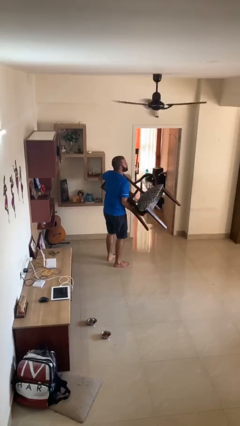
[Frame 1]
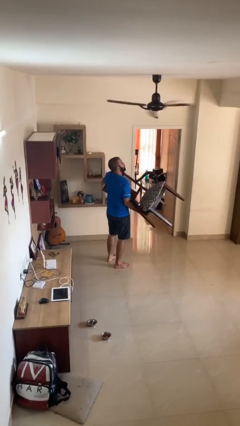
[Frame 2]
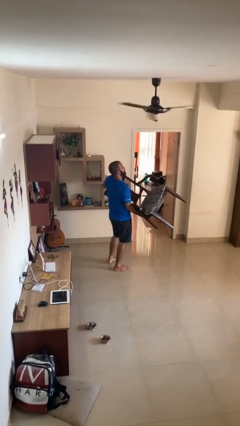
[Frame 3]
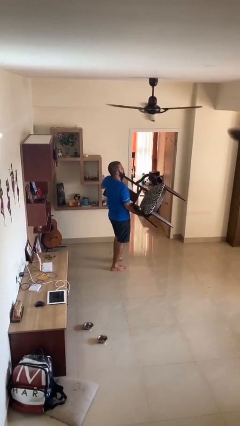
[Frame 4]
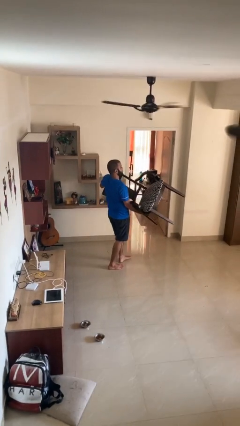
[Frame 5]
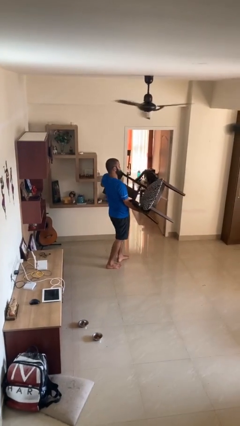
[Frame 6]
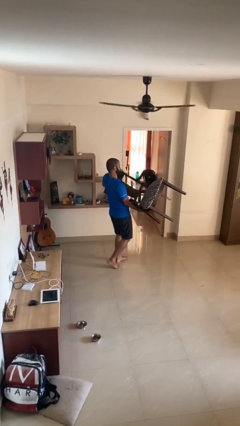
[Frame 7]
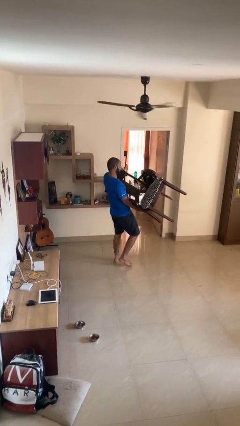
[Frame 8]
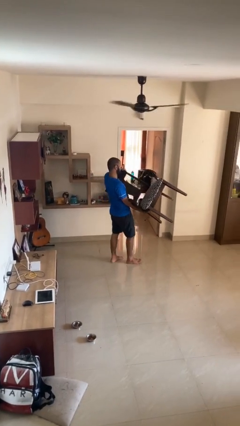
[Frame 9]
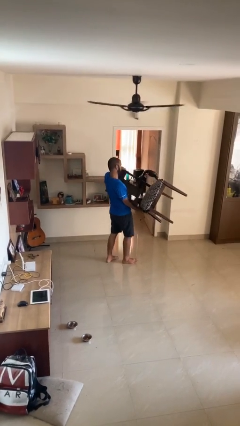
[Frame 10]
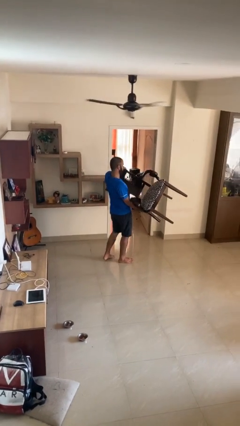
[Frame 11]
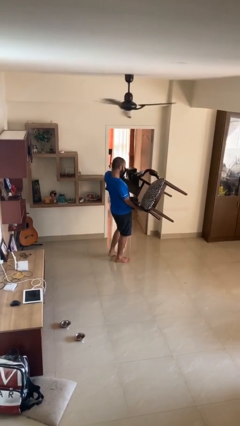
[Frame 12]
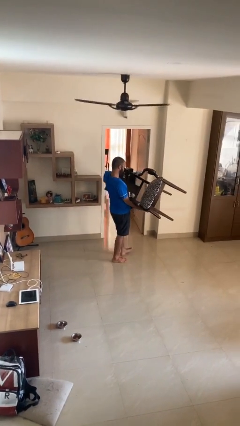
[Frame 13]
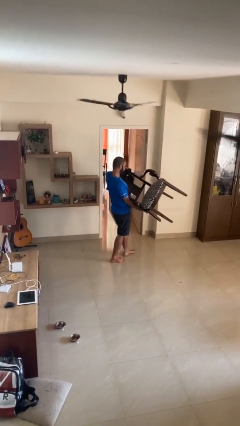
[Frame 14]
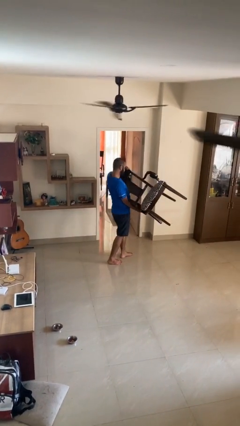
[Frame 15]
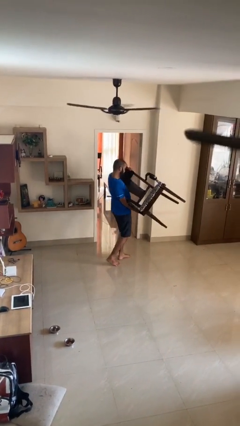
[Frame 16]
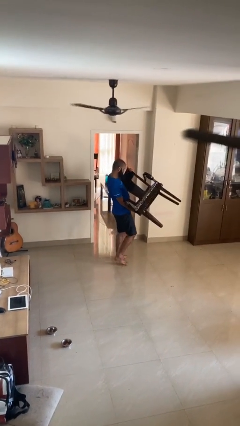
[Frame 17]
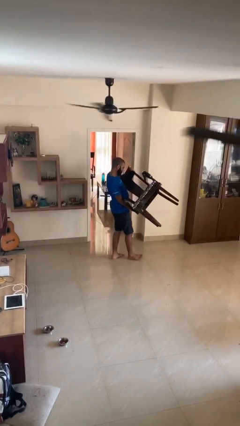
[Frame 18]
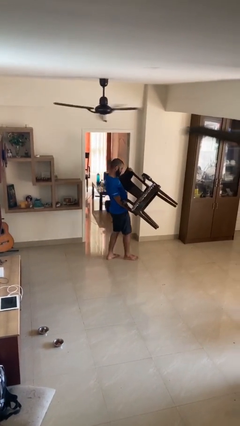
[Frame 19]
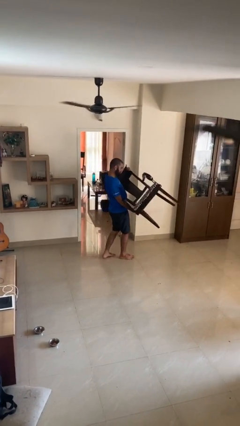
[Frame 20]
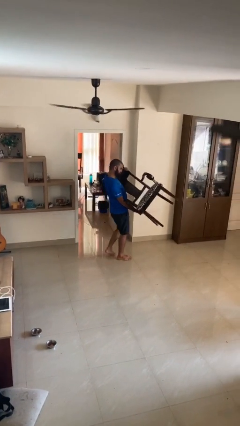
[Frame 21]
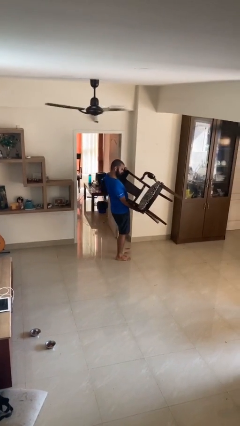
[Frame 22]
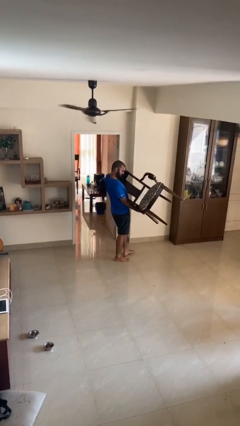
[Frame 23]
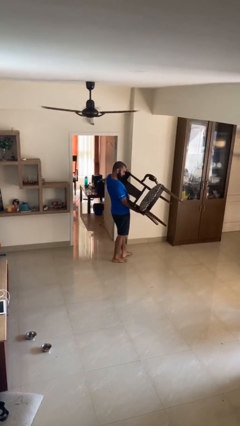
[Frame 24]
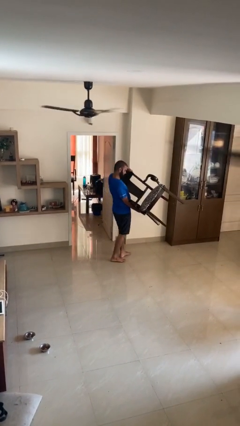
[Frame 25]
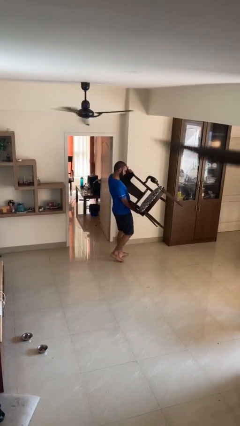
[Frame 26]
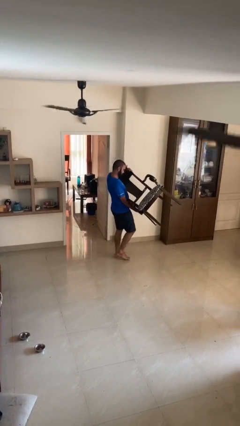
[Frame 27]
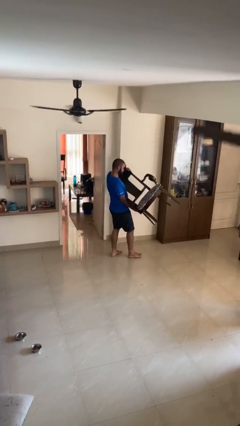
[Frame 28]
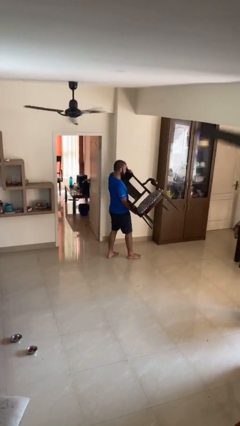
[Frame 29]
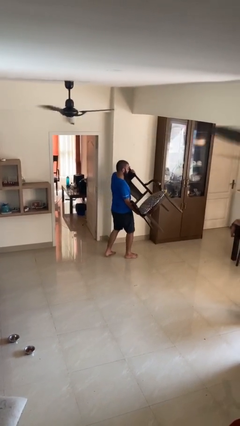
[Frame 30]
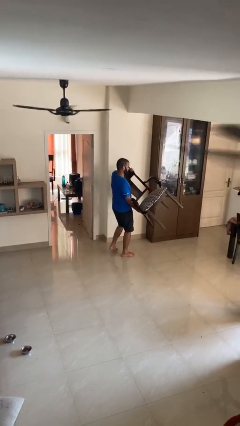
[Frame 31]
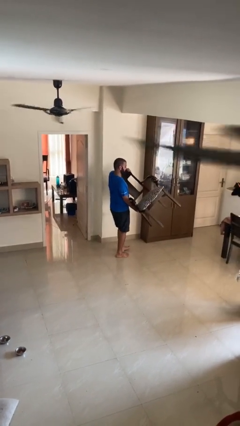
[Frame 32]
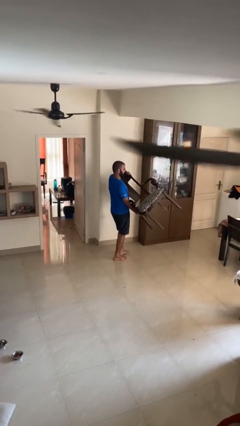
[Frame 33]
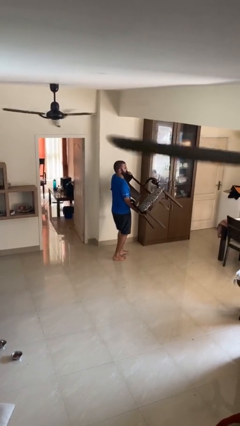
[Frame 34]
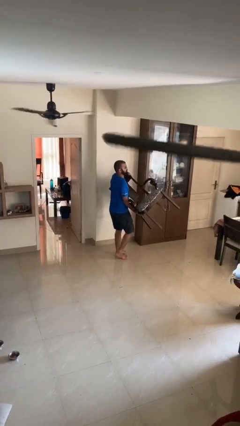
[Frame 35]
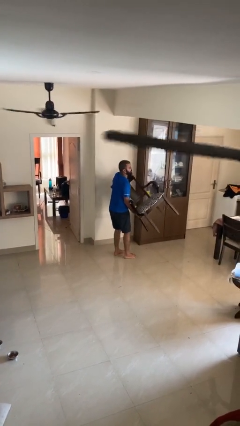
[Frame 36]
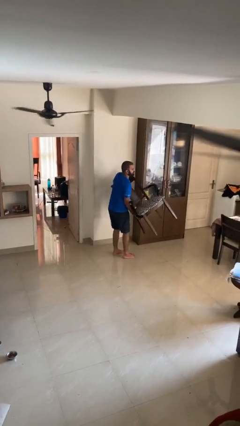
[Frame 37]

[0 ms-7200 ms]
person carries heavy object

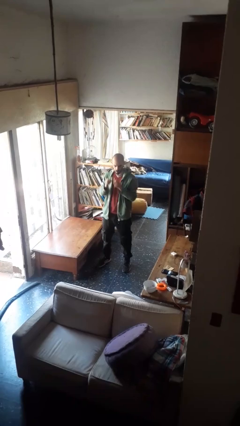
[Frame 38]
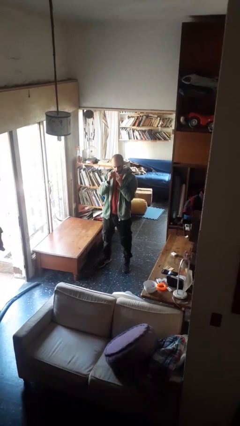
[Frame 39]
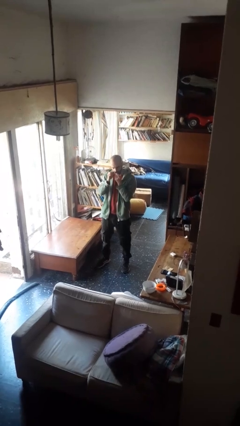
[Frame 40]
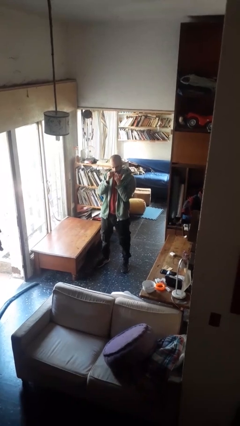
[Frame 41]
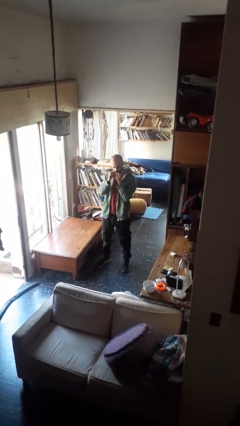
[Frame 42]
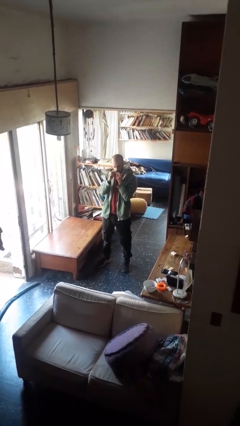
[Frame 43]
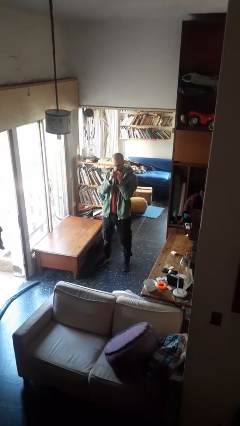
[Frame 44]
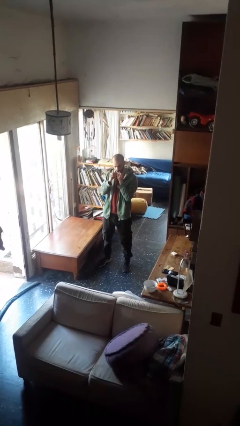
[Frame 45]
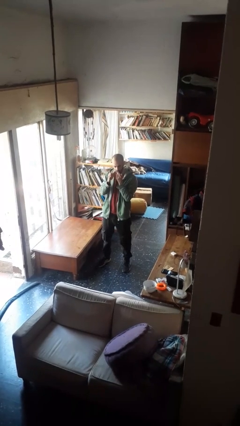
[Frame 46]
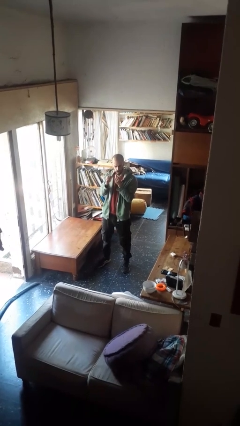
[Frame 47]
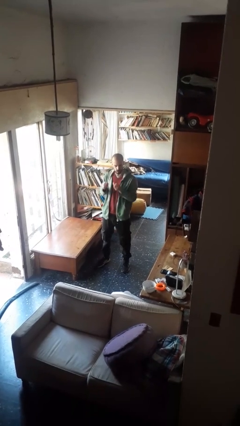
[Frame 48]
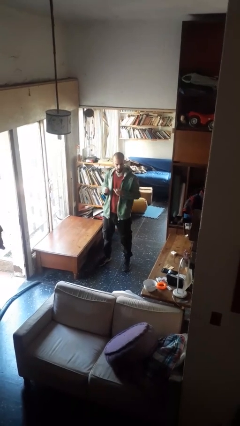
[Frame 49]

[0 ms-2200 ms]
person flosses

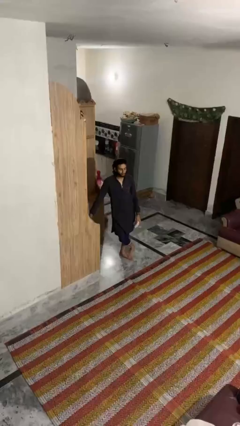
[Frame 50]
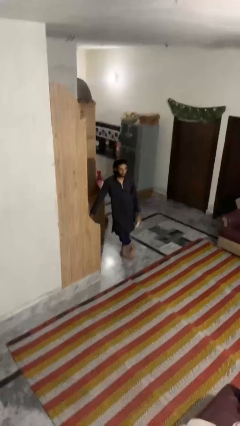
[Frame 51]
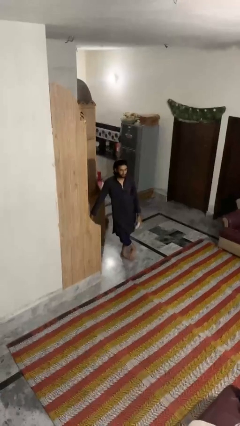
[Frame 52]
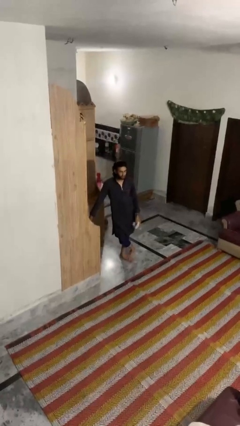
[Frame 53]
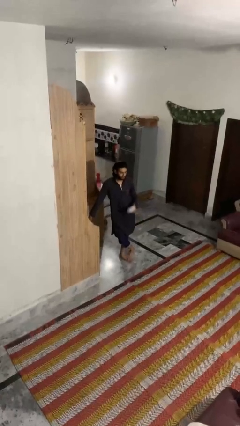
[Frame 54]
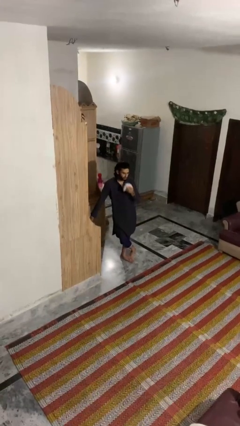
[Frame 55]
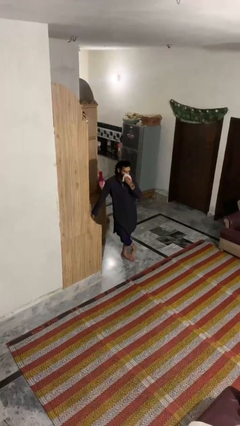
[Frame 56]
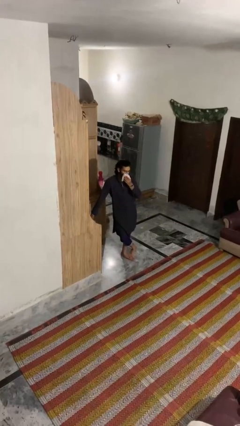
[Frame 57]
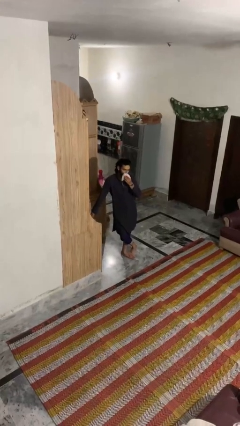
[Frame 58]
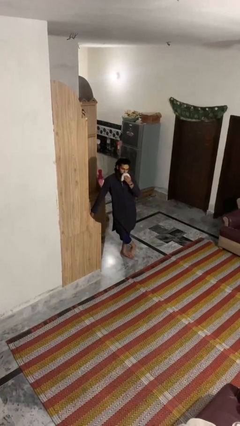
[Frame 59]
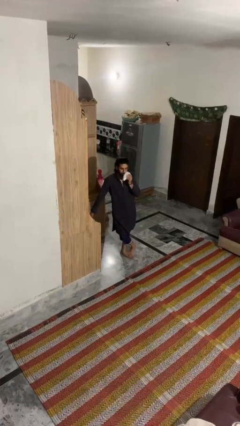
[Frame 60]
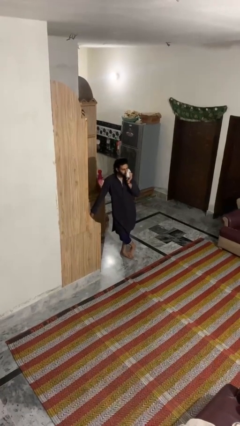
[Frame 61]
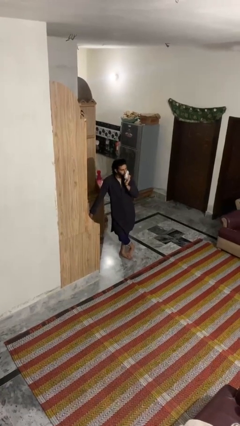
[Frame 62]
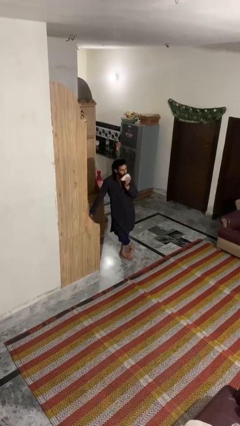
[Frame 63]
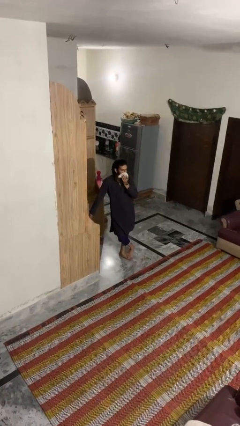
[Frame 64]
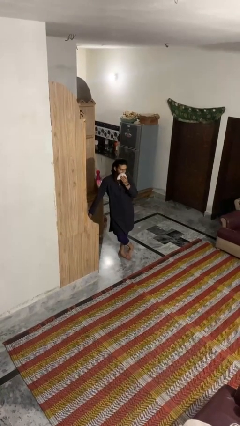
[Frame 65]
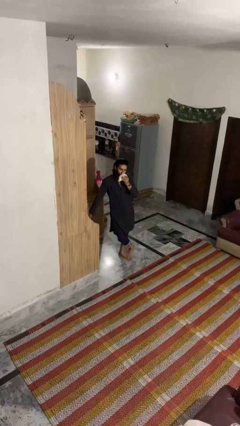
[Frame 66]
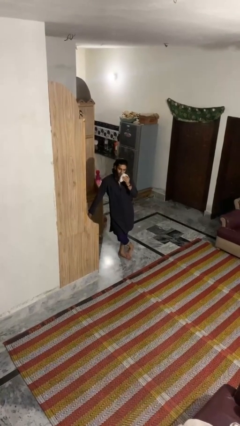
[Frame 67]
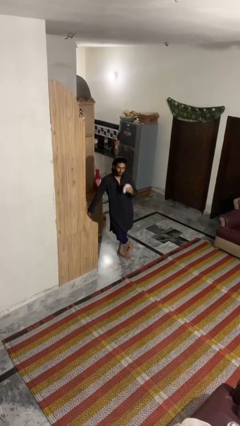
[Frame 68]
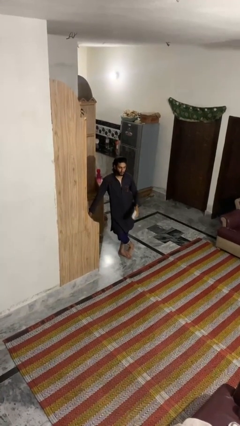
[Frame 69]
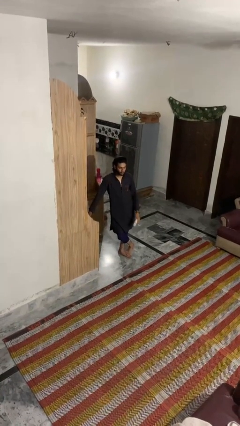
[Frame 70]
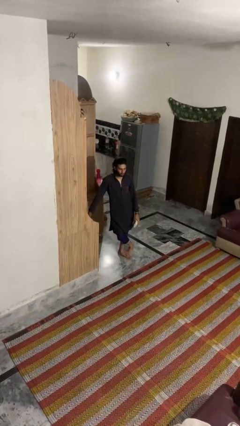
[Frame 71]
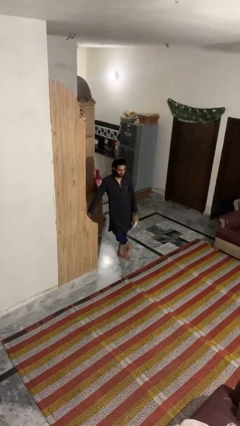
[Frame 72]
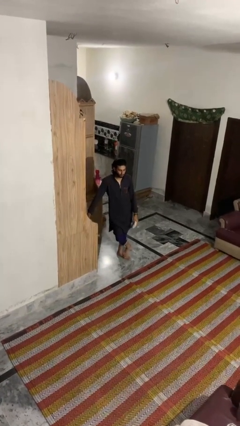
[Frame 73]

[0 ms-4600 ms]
person wipes mouth with napkin

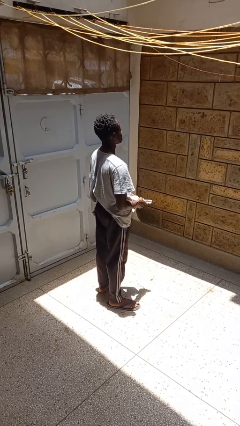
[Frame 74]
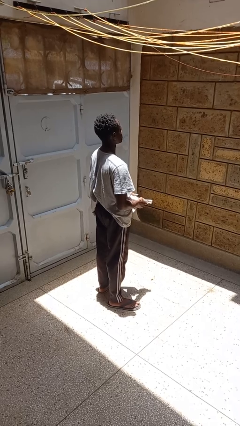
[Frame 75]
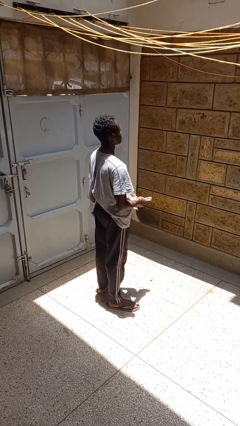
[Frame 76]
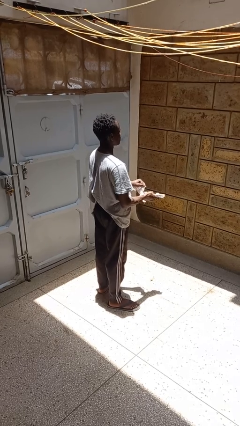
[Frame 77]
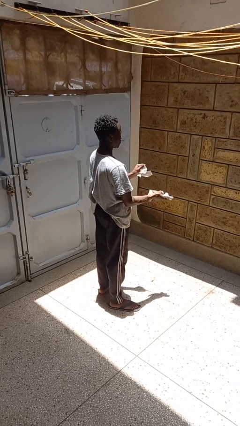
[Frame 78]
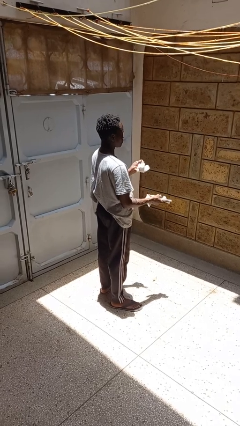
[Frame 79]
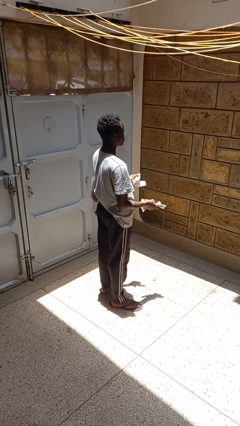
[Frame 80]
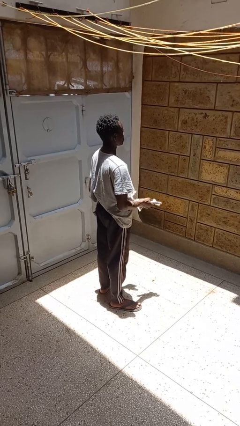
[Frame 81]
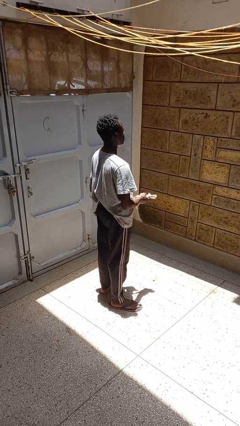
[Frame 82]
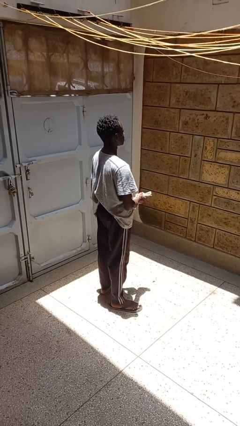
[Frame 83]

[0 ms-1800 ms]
person tears paper

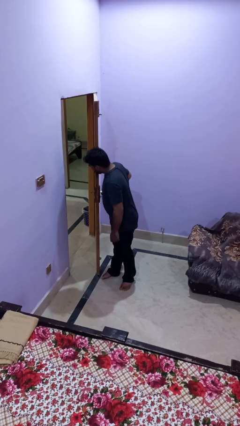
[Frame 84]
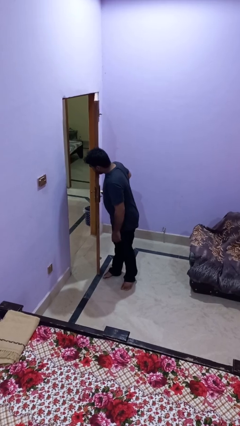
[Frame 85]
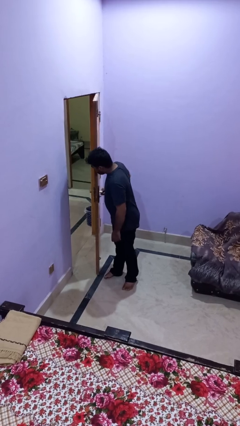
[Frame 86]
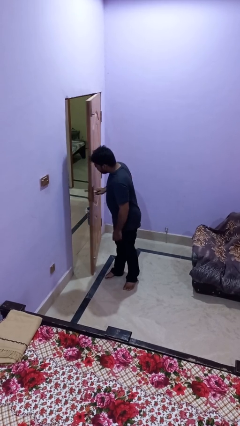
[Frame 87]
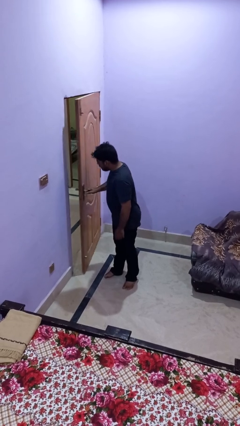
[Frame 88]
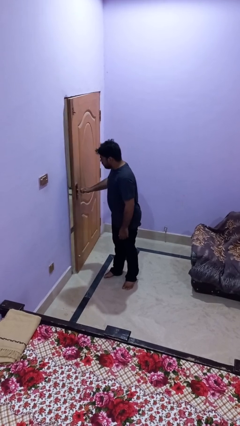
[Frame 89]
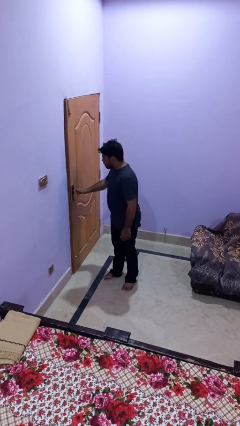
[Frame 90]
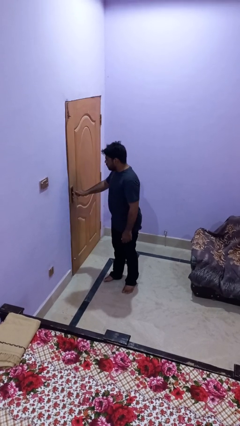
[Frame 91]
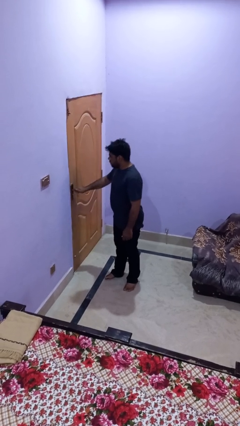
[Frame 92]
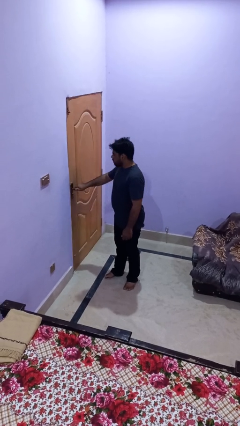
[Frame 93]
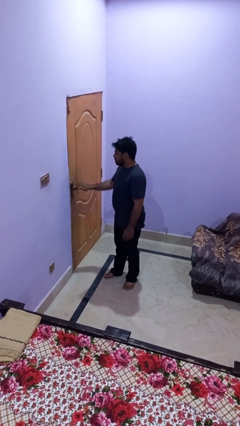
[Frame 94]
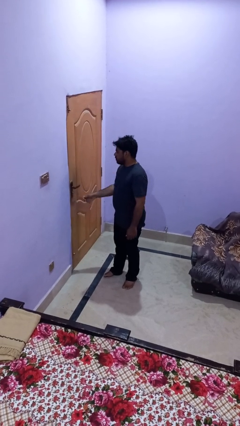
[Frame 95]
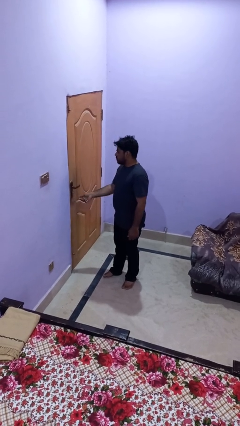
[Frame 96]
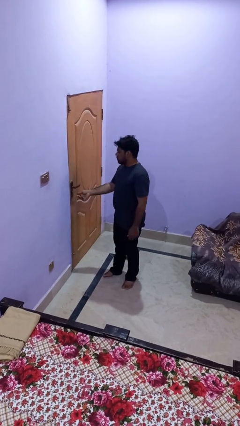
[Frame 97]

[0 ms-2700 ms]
person closes facility door
